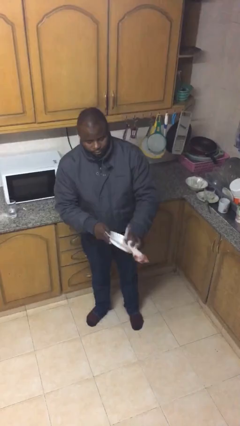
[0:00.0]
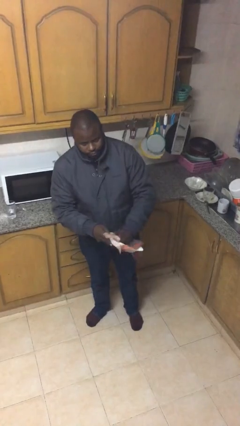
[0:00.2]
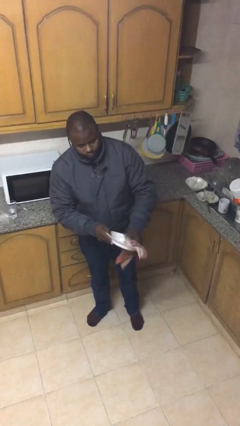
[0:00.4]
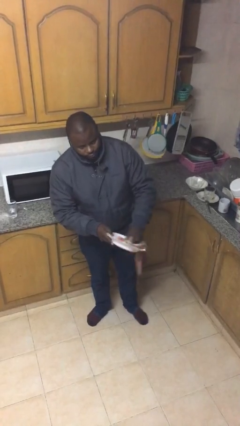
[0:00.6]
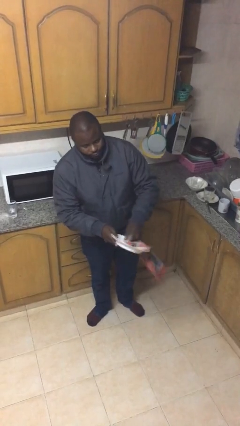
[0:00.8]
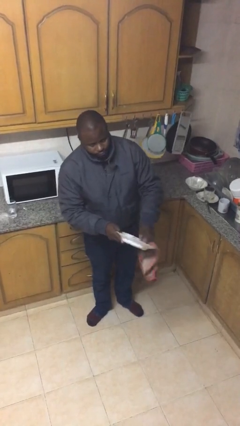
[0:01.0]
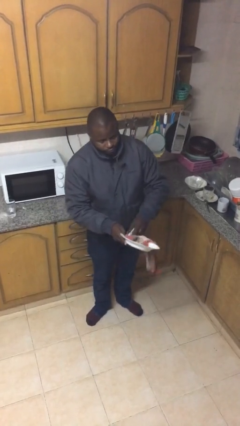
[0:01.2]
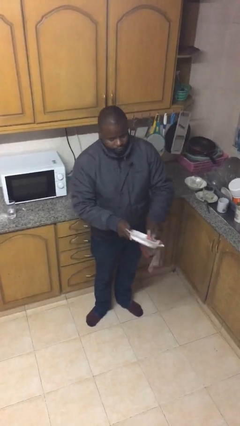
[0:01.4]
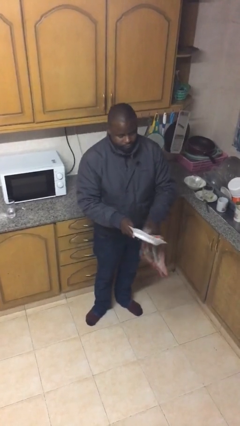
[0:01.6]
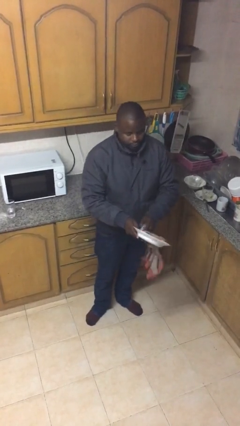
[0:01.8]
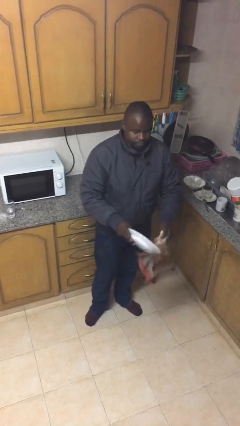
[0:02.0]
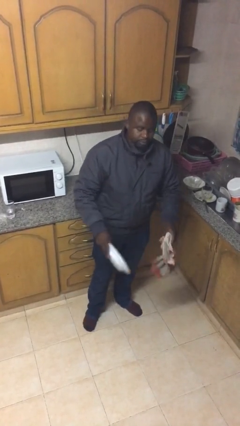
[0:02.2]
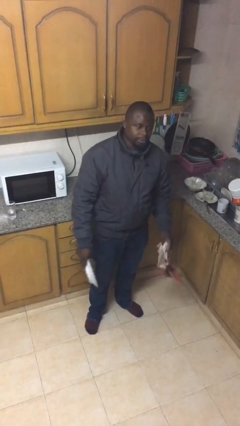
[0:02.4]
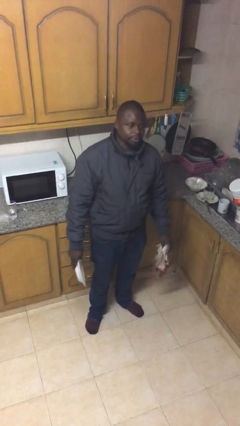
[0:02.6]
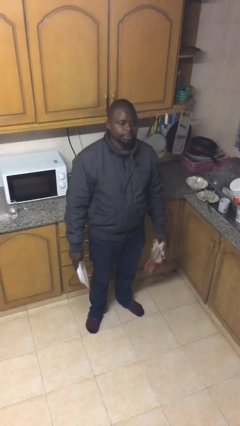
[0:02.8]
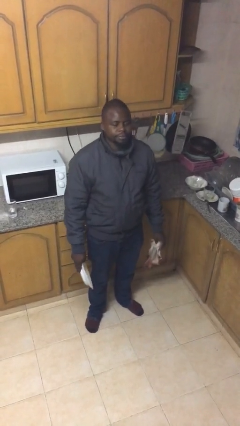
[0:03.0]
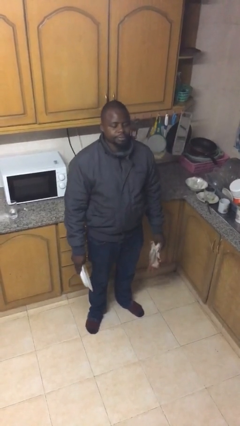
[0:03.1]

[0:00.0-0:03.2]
person dries dish

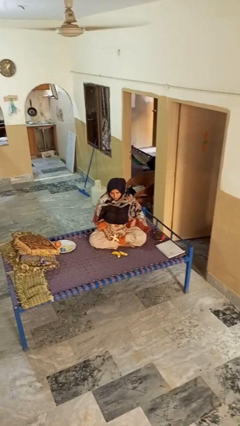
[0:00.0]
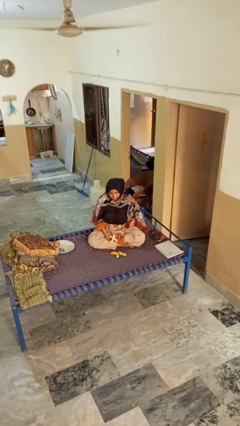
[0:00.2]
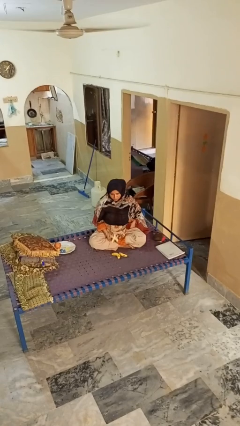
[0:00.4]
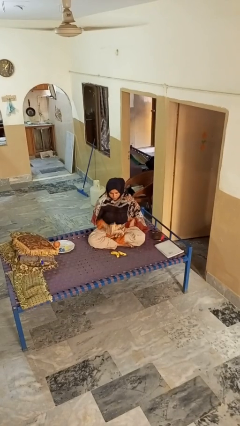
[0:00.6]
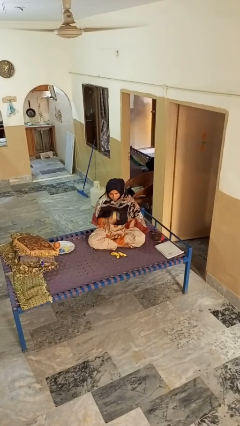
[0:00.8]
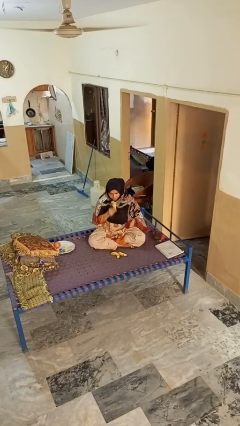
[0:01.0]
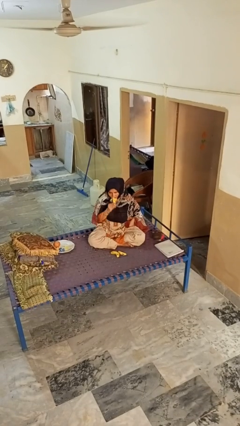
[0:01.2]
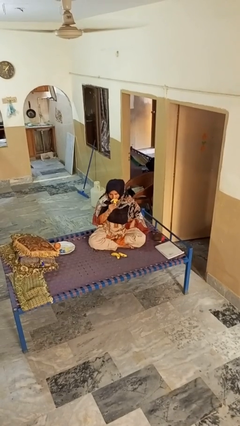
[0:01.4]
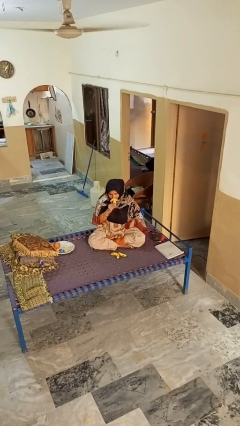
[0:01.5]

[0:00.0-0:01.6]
person eats banana

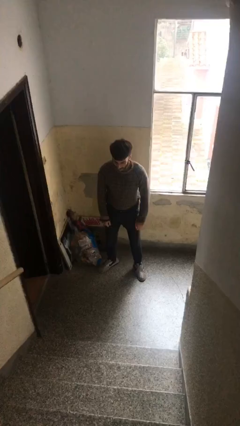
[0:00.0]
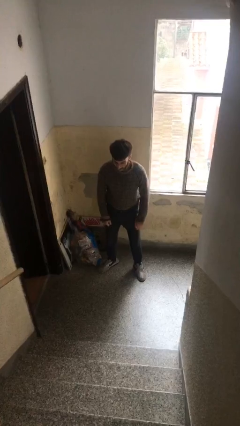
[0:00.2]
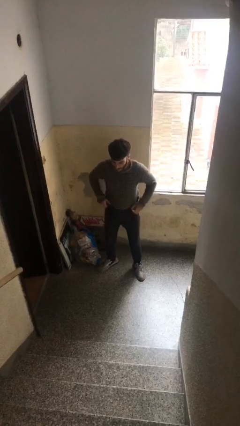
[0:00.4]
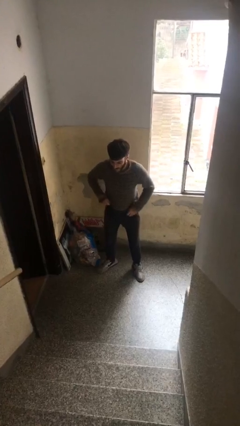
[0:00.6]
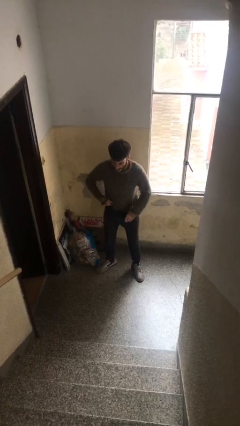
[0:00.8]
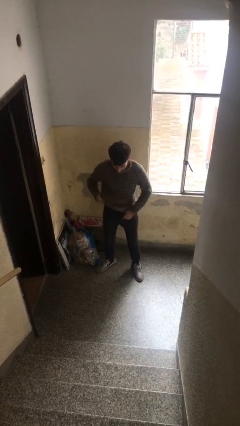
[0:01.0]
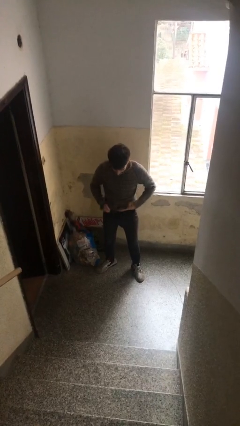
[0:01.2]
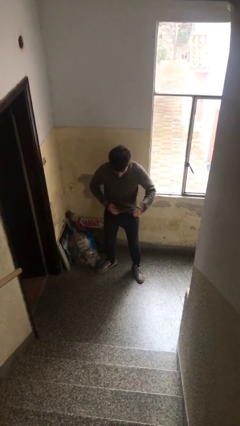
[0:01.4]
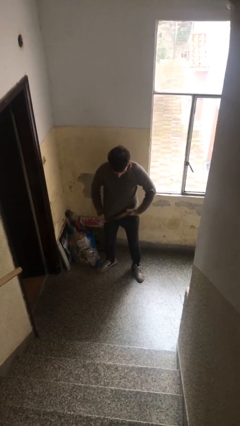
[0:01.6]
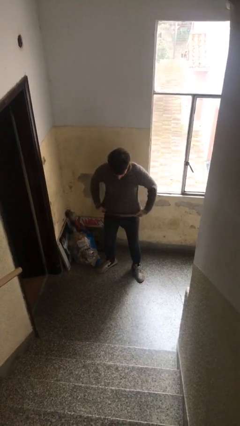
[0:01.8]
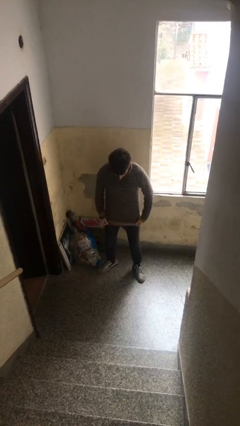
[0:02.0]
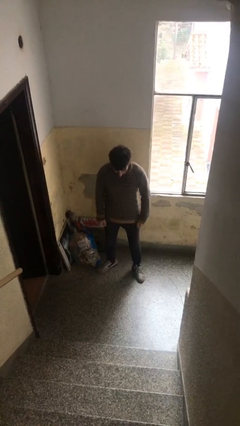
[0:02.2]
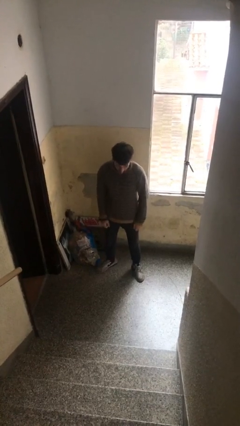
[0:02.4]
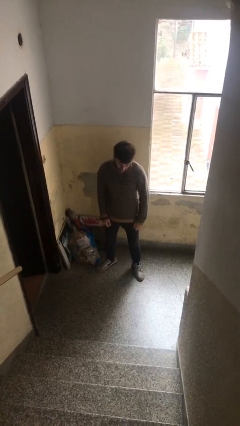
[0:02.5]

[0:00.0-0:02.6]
person untucks shirt

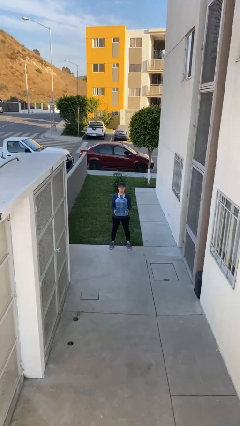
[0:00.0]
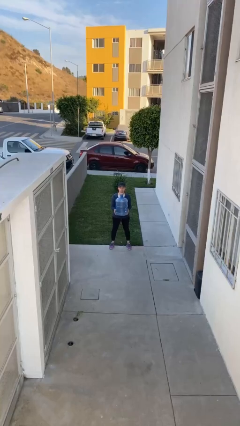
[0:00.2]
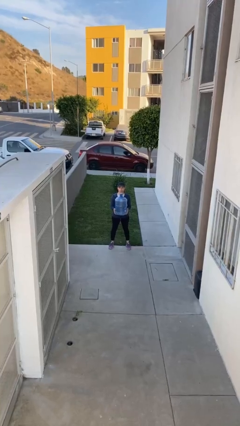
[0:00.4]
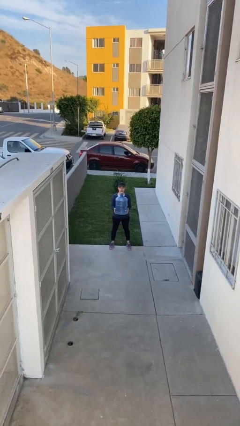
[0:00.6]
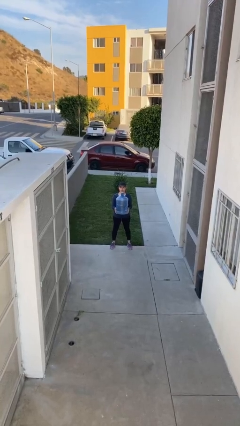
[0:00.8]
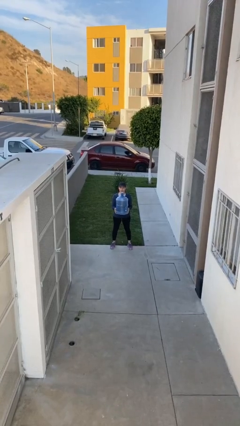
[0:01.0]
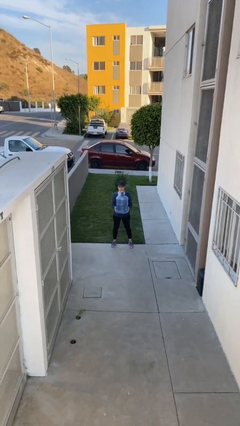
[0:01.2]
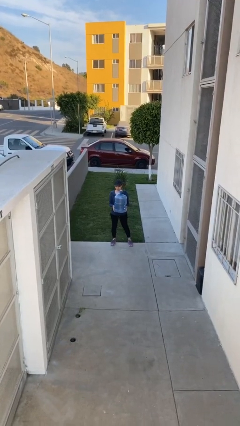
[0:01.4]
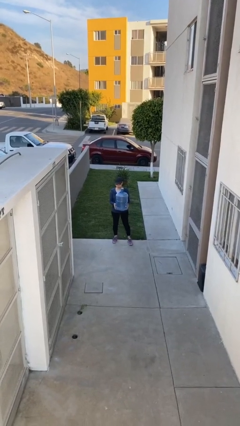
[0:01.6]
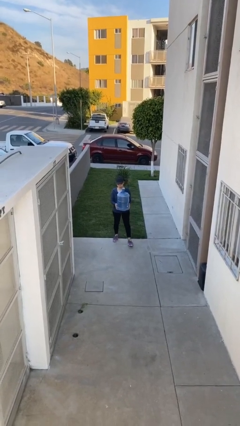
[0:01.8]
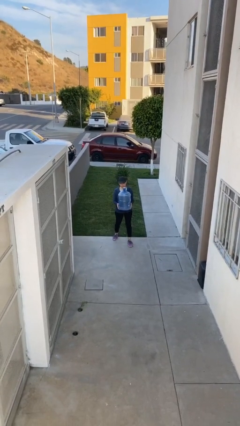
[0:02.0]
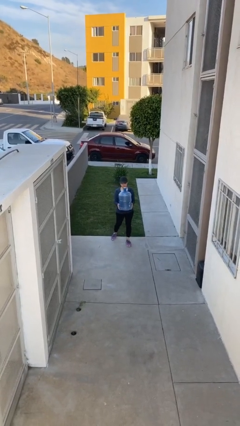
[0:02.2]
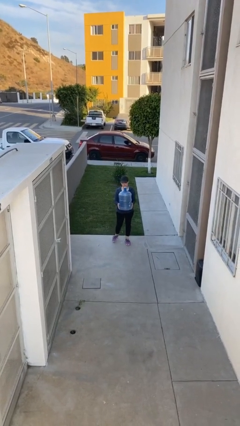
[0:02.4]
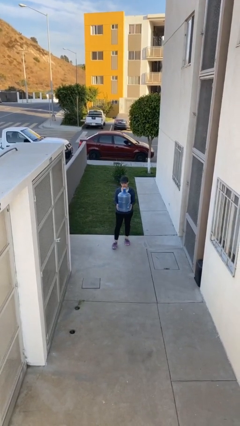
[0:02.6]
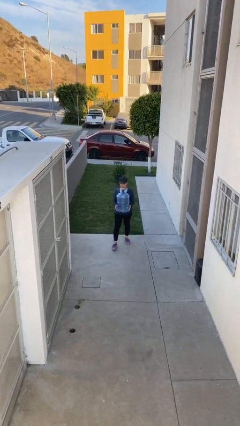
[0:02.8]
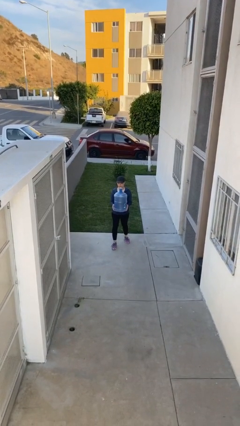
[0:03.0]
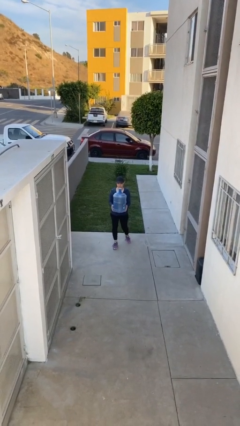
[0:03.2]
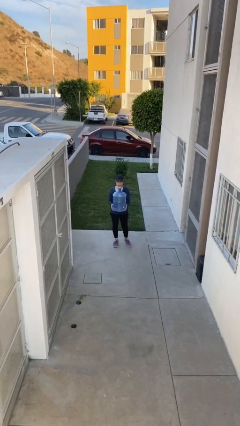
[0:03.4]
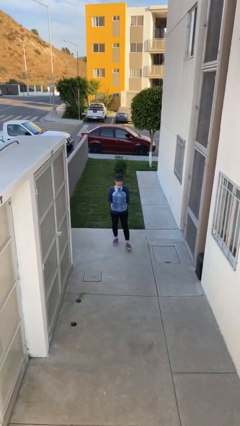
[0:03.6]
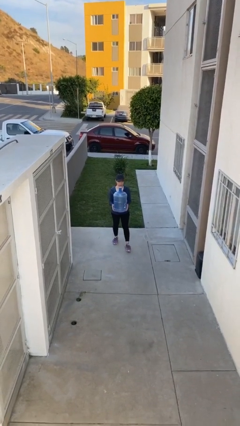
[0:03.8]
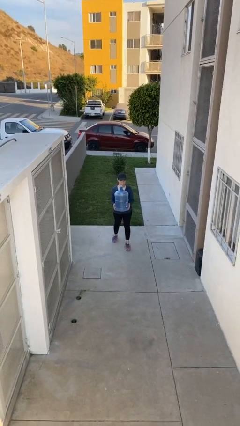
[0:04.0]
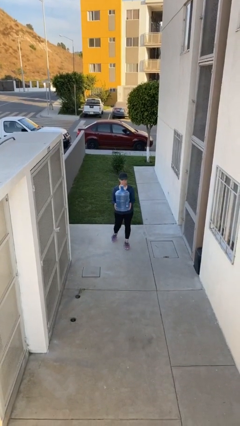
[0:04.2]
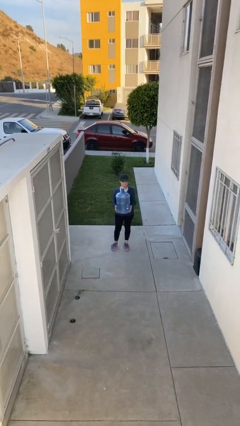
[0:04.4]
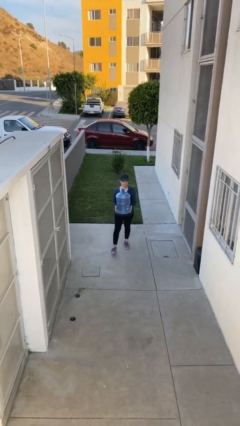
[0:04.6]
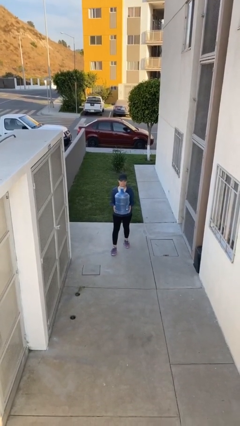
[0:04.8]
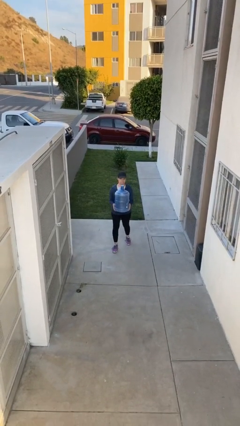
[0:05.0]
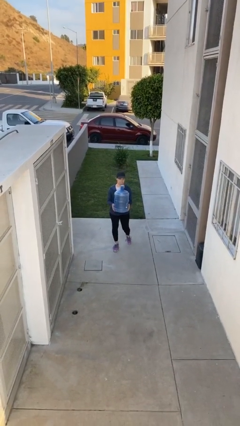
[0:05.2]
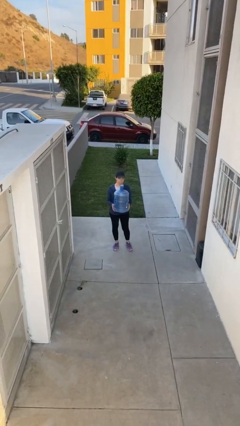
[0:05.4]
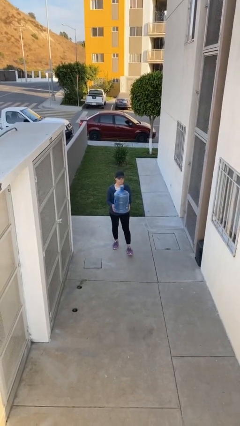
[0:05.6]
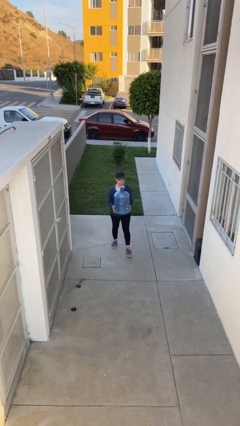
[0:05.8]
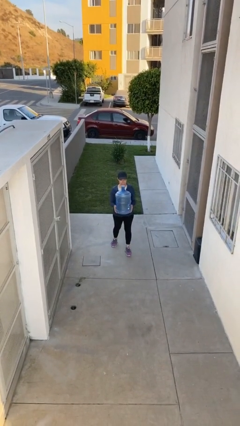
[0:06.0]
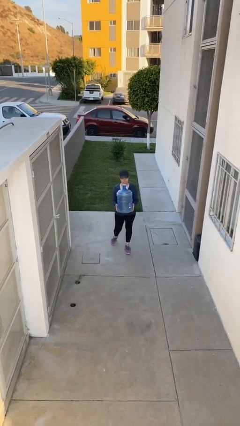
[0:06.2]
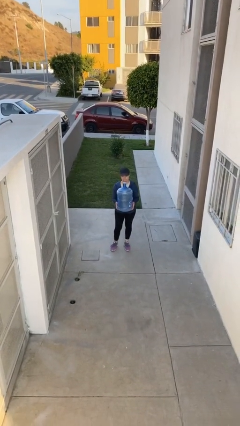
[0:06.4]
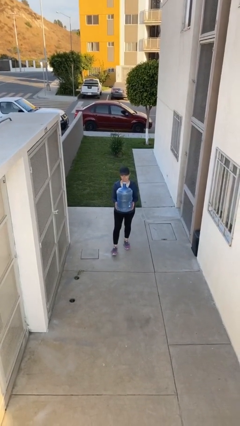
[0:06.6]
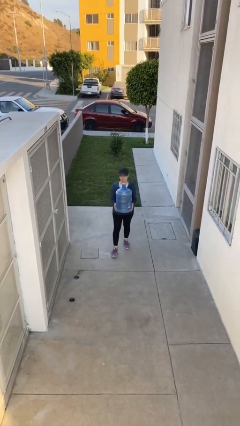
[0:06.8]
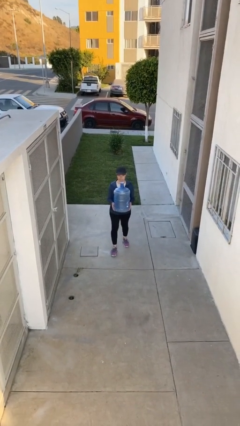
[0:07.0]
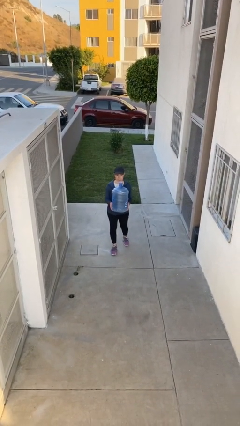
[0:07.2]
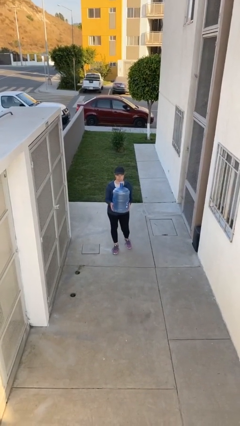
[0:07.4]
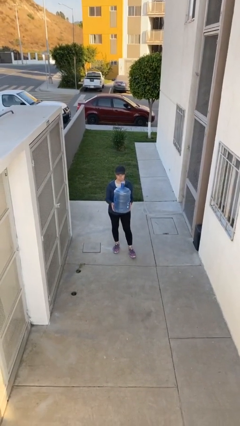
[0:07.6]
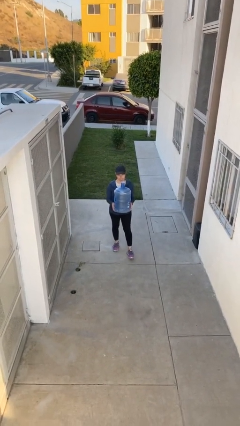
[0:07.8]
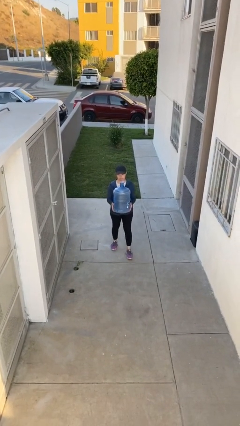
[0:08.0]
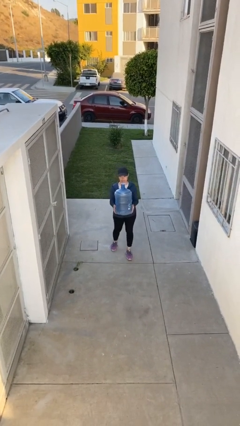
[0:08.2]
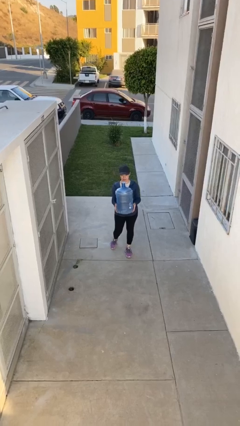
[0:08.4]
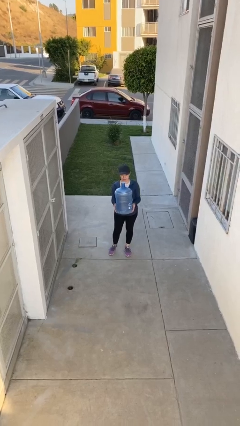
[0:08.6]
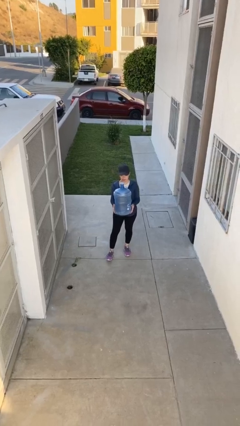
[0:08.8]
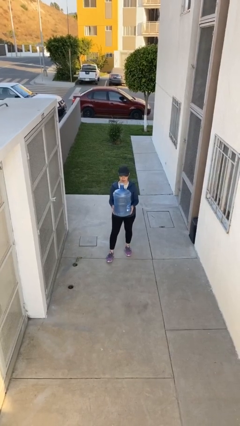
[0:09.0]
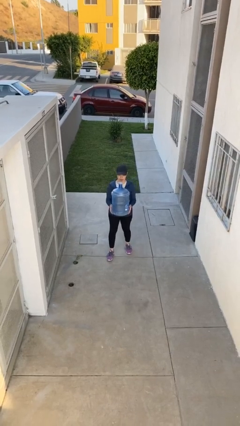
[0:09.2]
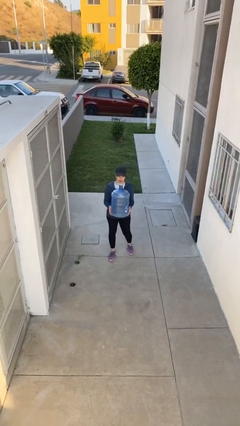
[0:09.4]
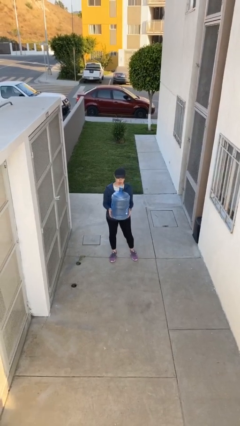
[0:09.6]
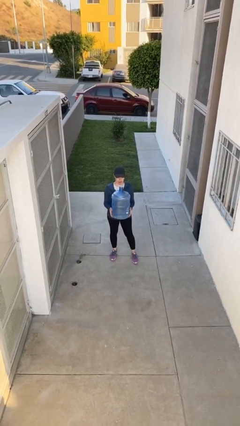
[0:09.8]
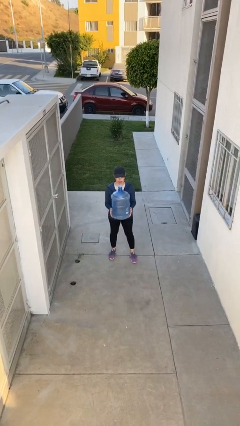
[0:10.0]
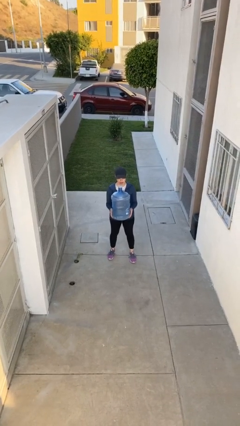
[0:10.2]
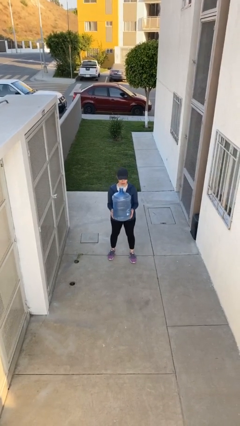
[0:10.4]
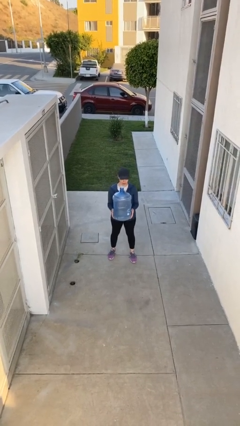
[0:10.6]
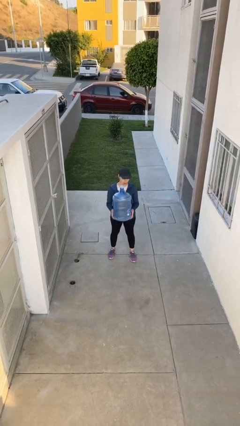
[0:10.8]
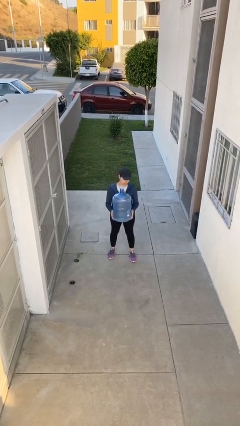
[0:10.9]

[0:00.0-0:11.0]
person carries heavy object
